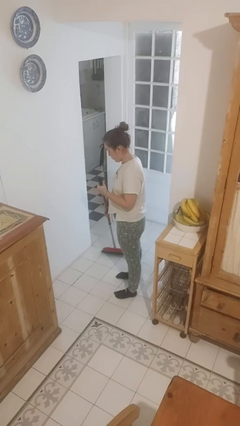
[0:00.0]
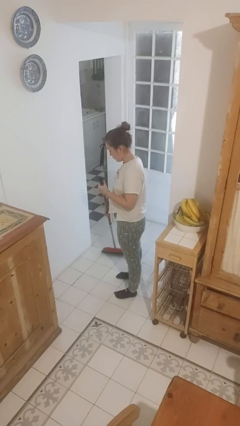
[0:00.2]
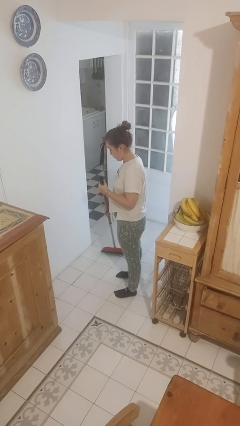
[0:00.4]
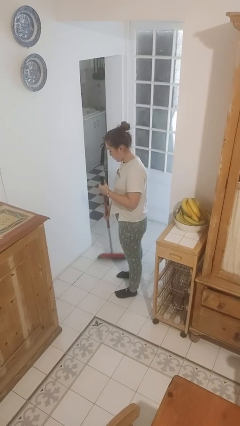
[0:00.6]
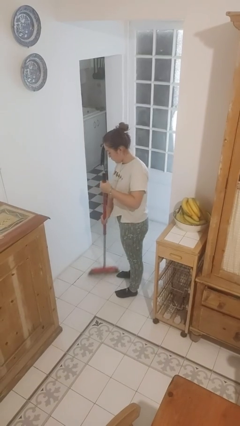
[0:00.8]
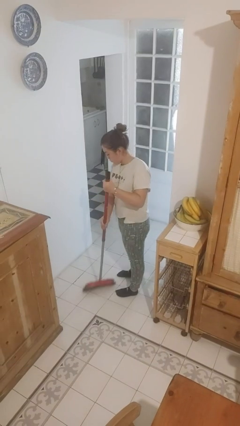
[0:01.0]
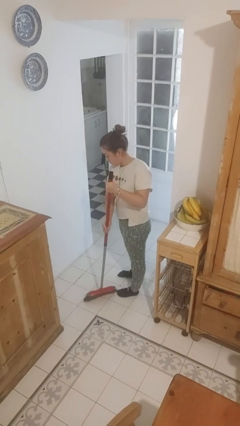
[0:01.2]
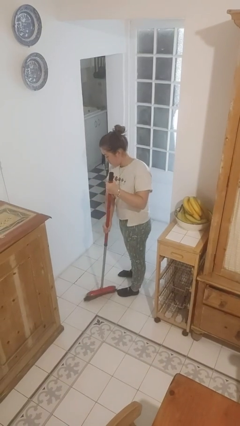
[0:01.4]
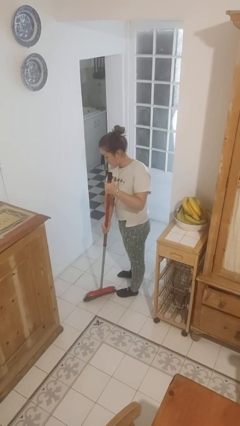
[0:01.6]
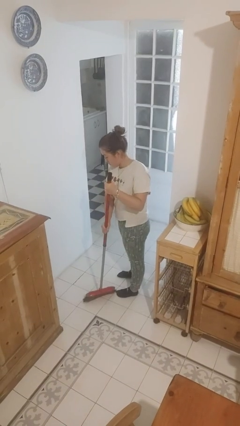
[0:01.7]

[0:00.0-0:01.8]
person sweeps floor

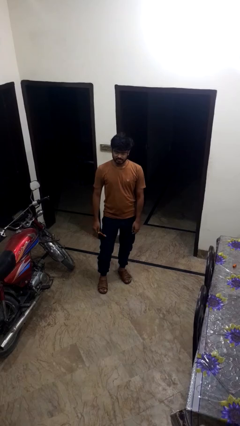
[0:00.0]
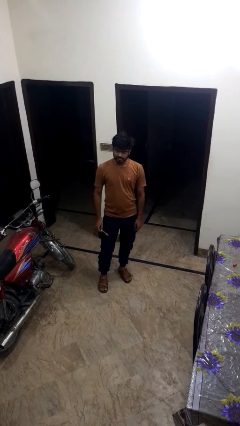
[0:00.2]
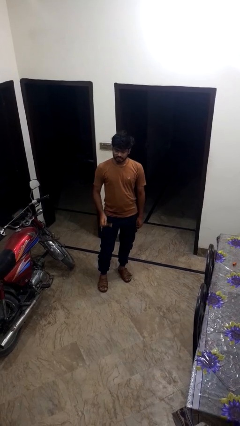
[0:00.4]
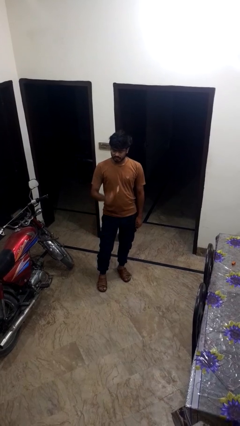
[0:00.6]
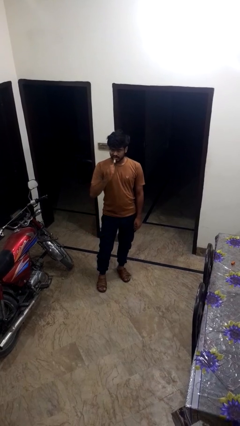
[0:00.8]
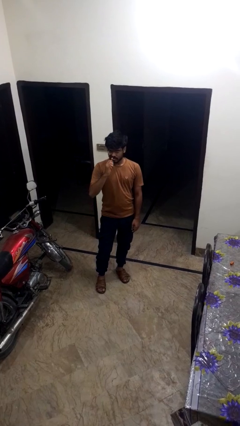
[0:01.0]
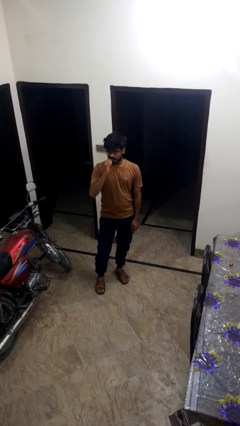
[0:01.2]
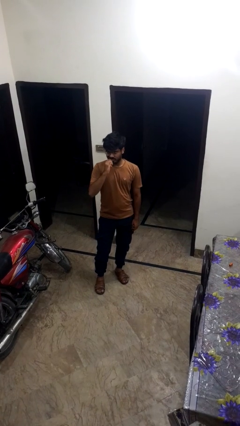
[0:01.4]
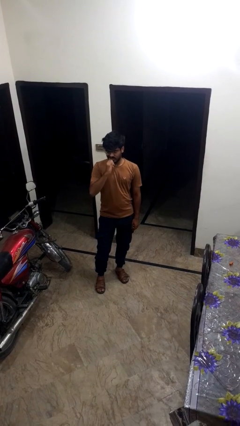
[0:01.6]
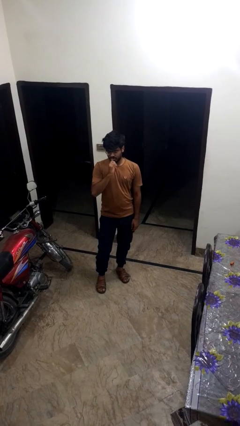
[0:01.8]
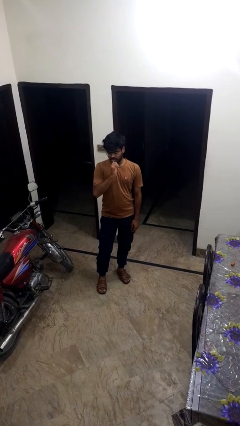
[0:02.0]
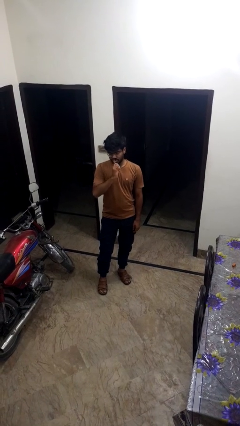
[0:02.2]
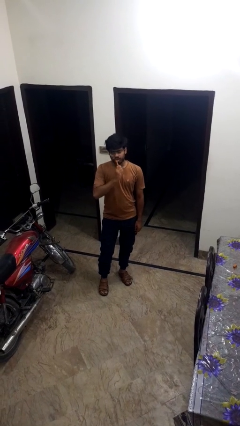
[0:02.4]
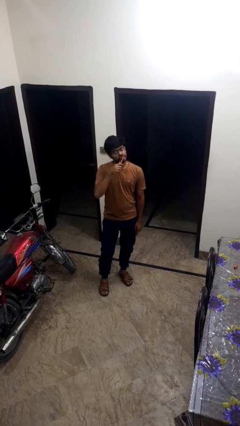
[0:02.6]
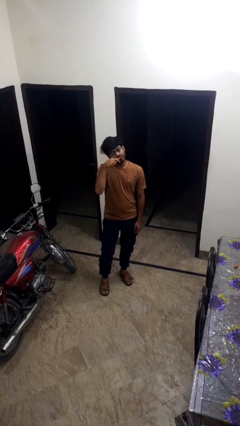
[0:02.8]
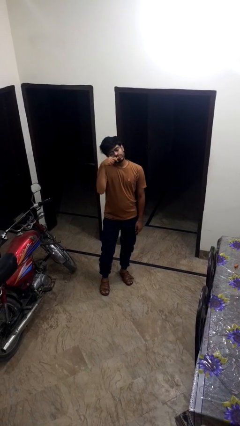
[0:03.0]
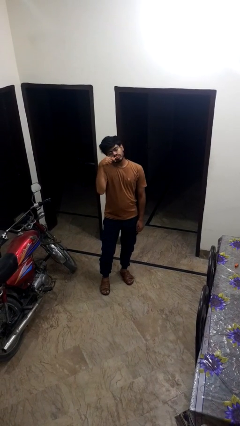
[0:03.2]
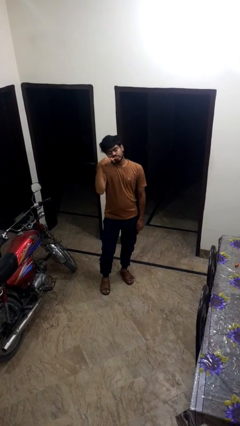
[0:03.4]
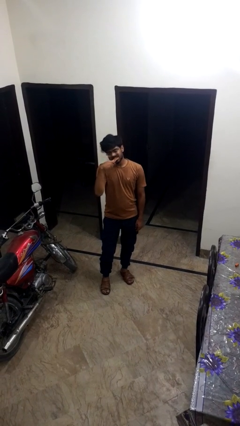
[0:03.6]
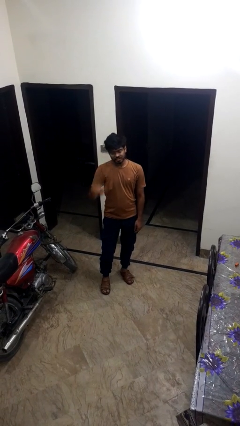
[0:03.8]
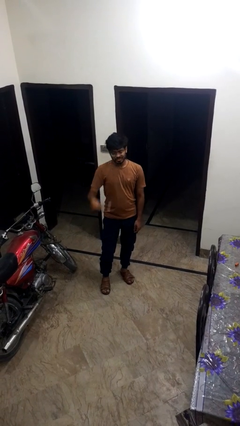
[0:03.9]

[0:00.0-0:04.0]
person brushes teeth

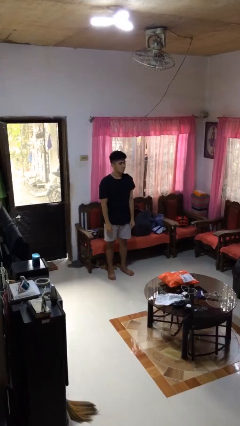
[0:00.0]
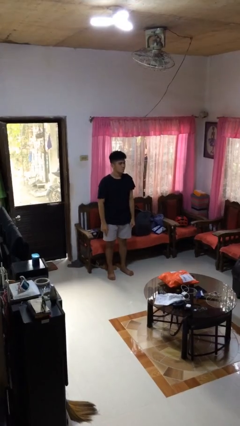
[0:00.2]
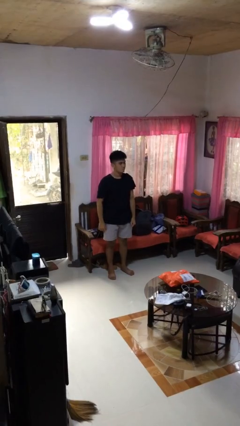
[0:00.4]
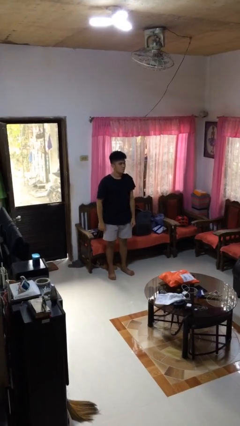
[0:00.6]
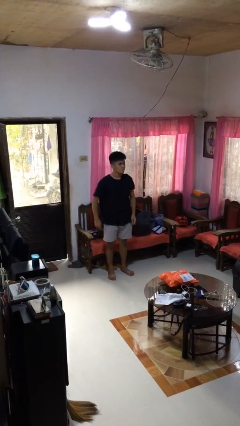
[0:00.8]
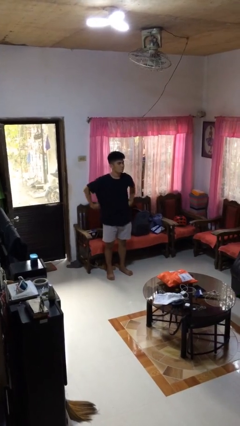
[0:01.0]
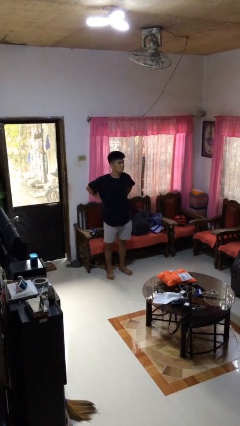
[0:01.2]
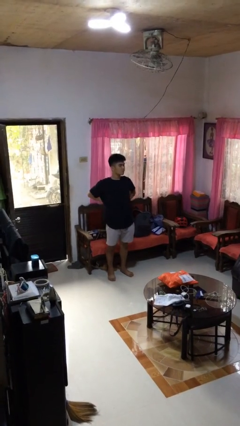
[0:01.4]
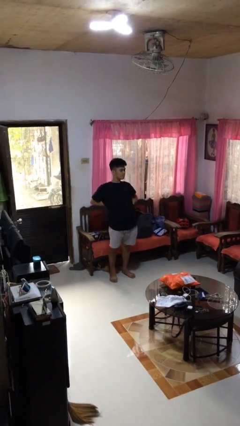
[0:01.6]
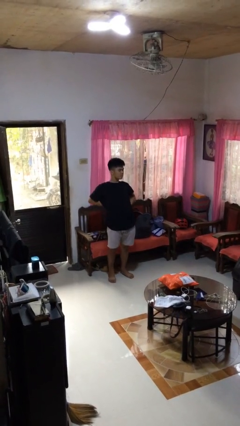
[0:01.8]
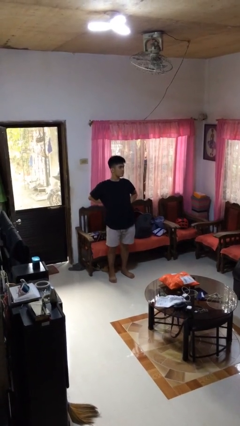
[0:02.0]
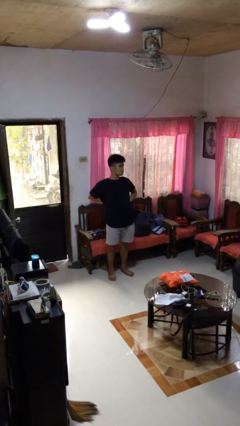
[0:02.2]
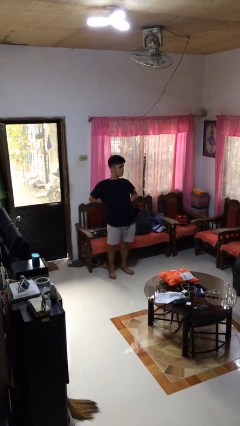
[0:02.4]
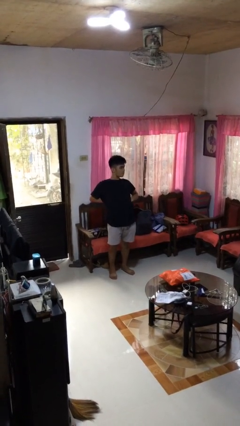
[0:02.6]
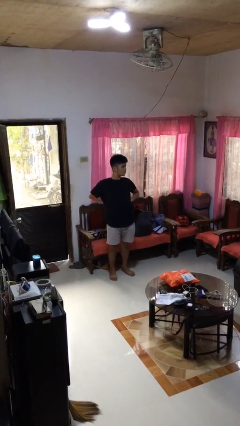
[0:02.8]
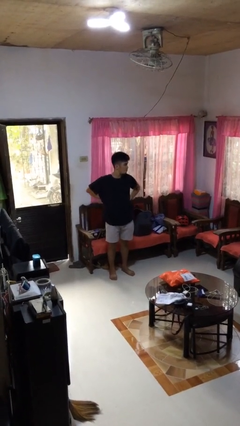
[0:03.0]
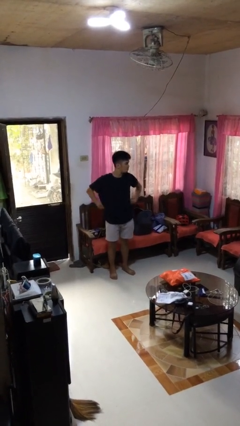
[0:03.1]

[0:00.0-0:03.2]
person stretches back

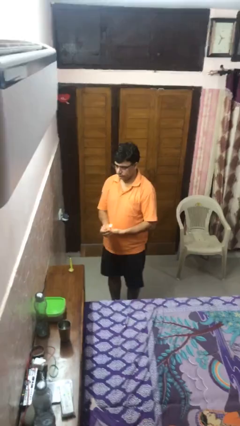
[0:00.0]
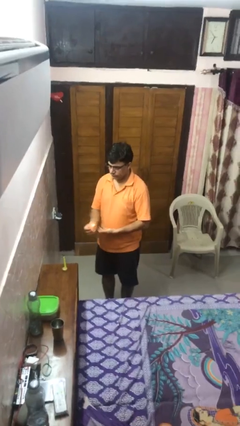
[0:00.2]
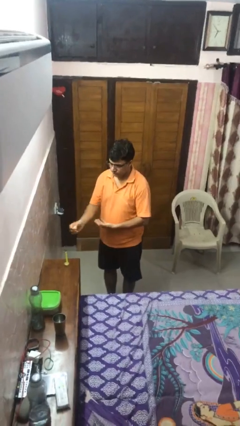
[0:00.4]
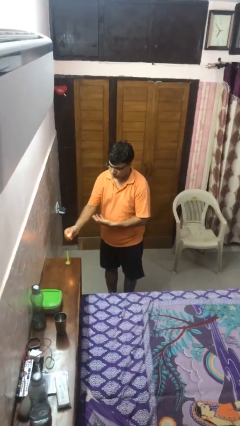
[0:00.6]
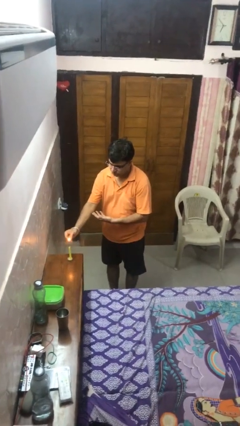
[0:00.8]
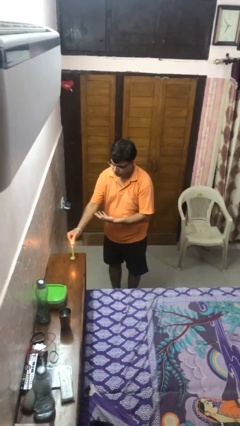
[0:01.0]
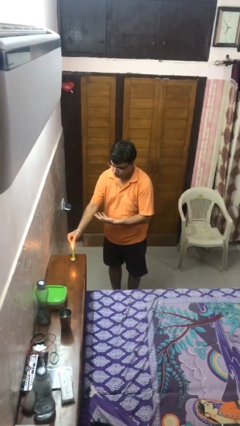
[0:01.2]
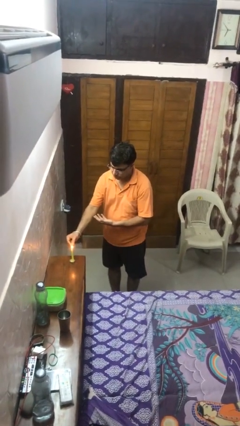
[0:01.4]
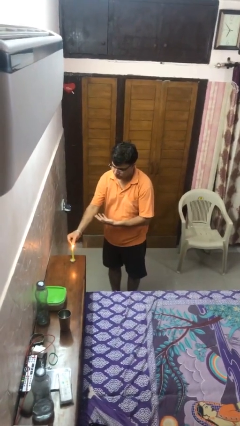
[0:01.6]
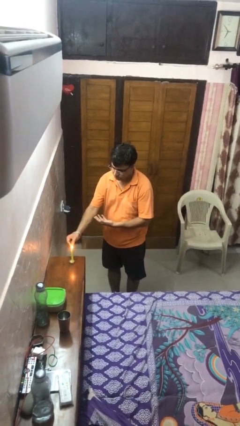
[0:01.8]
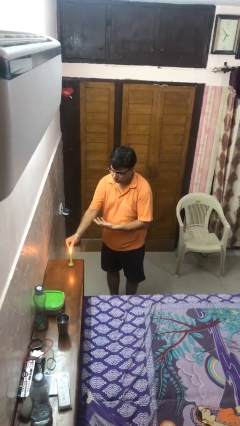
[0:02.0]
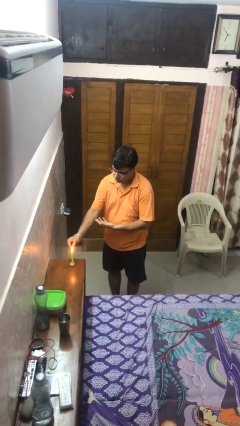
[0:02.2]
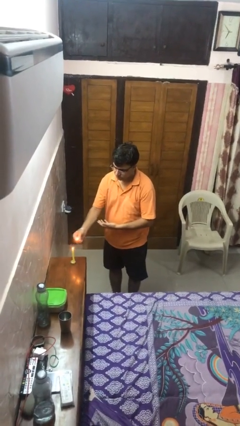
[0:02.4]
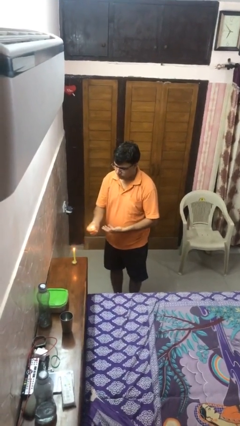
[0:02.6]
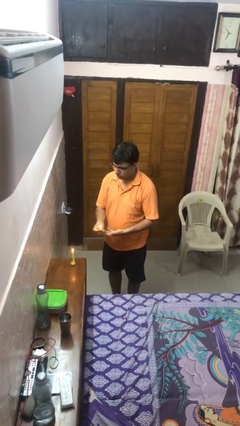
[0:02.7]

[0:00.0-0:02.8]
person lights candle

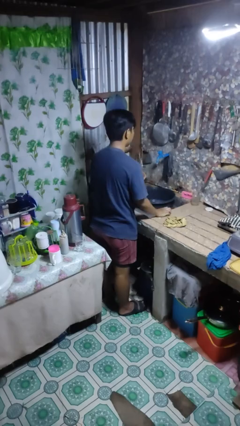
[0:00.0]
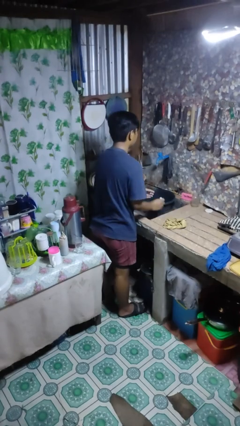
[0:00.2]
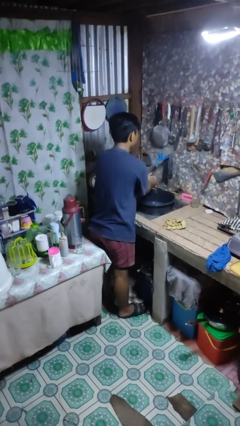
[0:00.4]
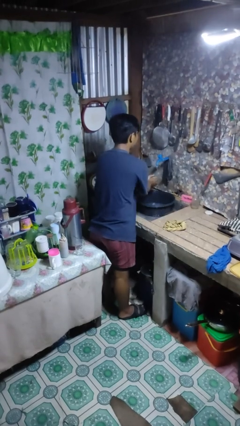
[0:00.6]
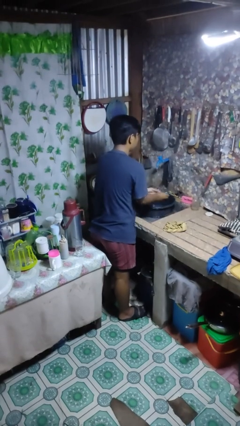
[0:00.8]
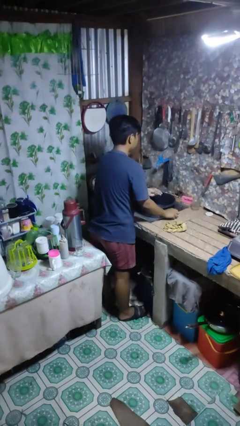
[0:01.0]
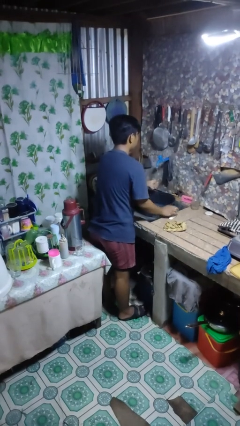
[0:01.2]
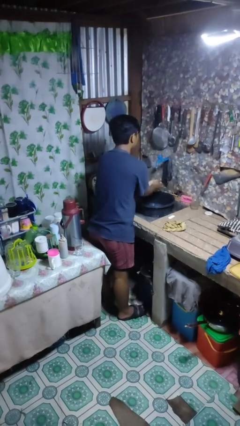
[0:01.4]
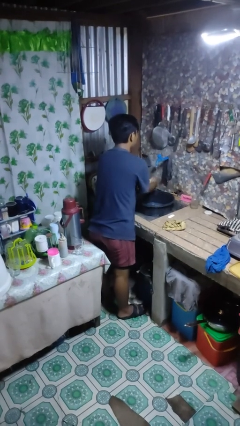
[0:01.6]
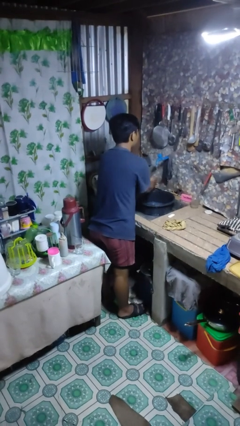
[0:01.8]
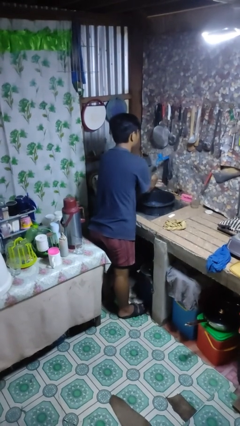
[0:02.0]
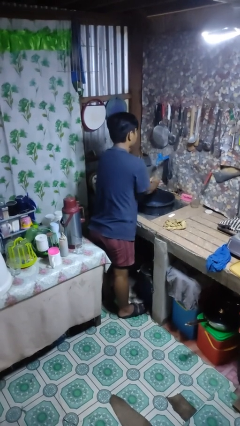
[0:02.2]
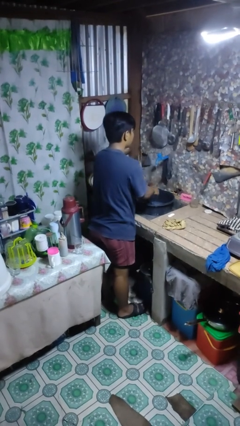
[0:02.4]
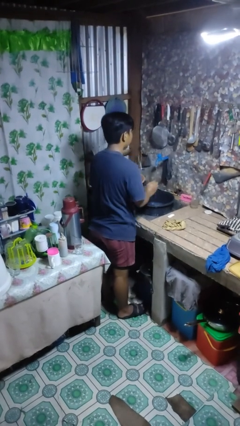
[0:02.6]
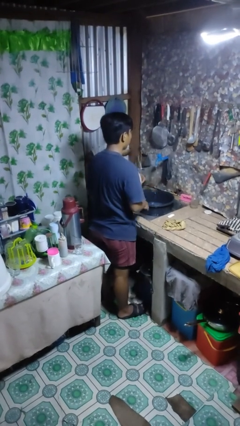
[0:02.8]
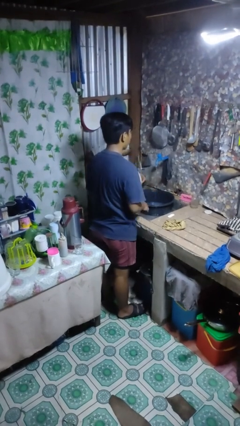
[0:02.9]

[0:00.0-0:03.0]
person washes hands

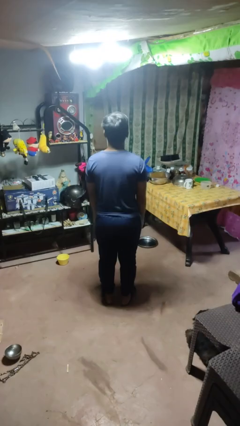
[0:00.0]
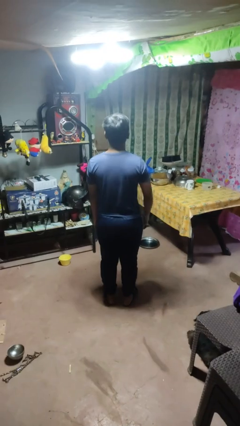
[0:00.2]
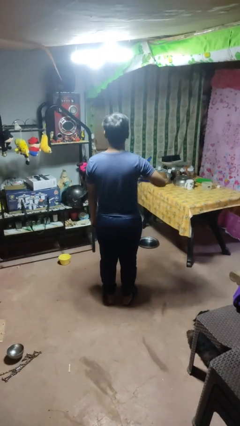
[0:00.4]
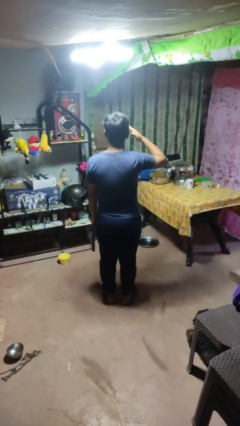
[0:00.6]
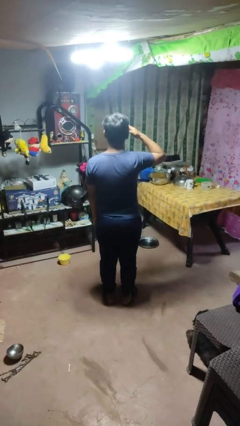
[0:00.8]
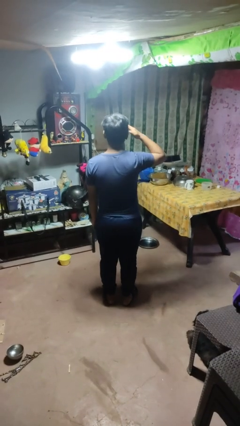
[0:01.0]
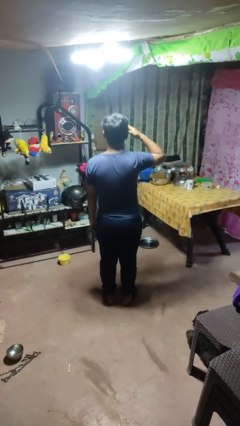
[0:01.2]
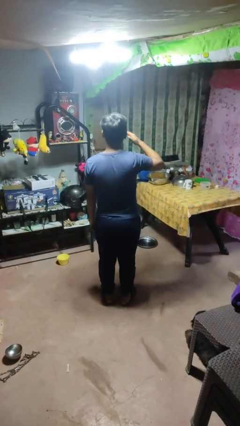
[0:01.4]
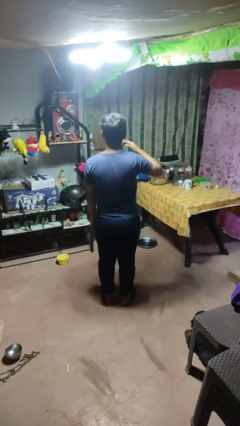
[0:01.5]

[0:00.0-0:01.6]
person salutes

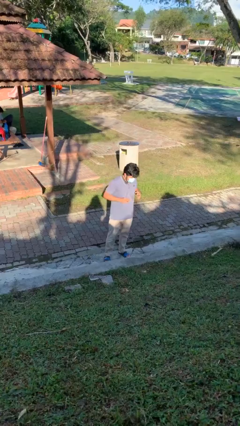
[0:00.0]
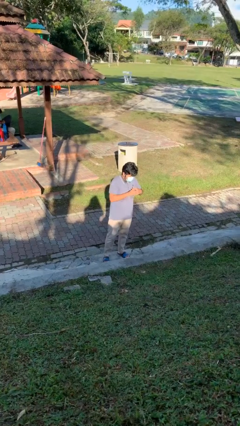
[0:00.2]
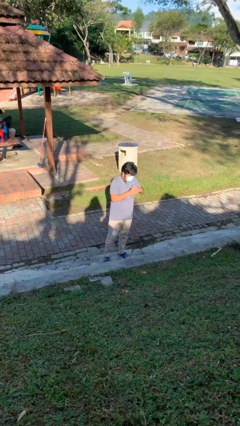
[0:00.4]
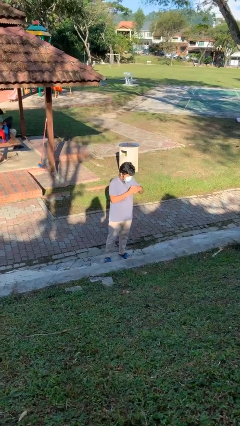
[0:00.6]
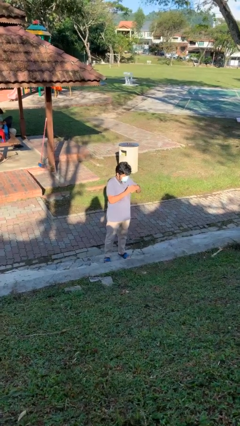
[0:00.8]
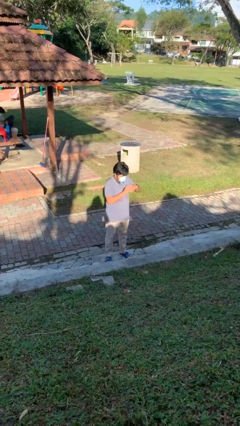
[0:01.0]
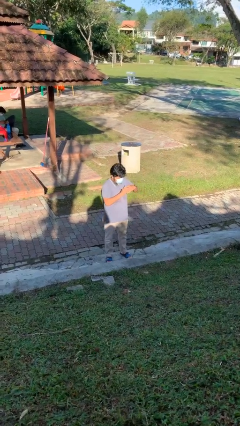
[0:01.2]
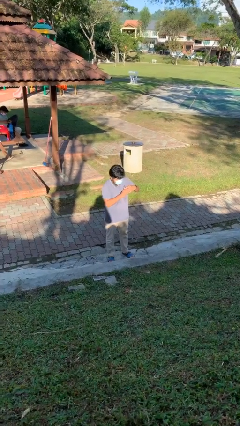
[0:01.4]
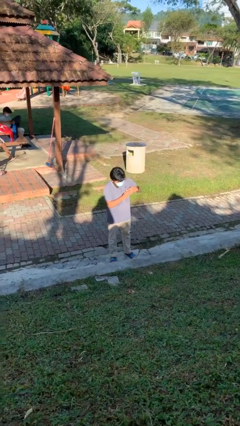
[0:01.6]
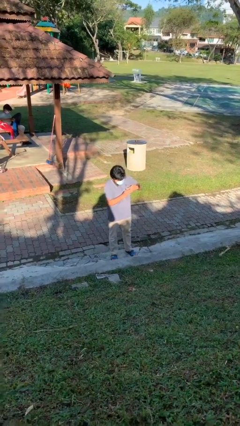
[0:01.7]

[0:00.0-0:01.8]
person takes off ring
